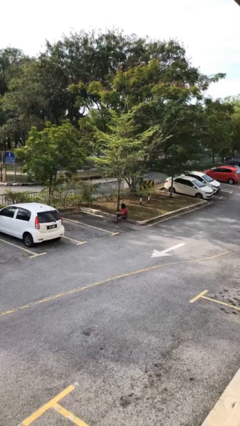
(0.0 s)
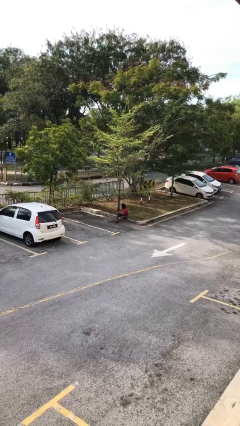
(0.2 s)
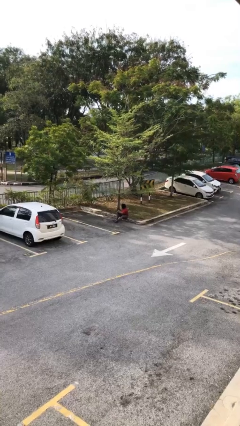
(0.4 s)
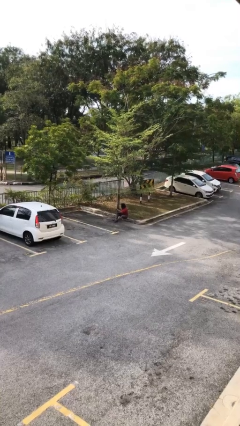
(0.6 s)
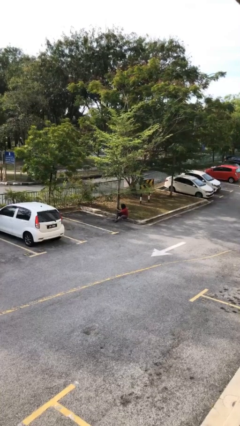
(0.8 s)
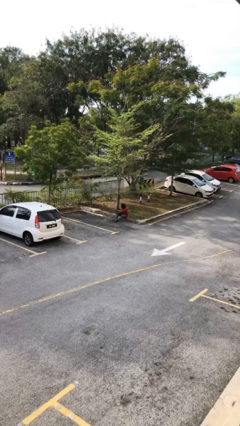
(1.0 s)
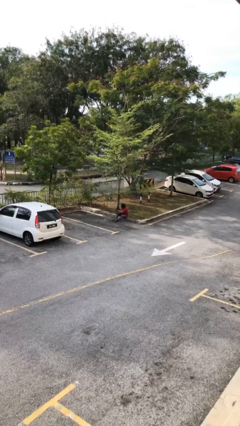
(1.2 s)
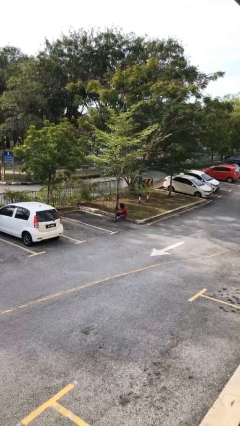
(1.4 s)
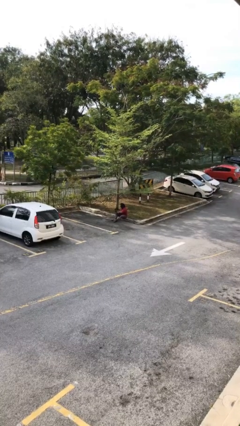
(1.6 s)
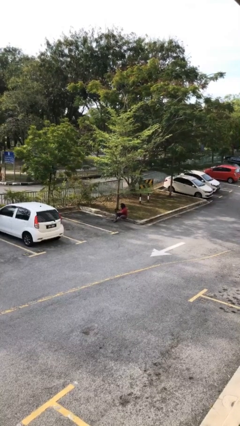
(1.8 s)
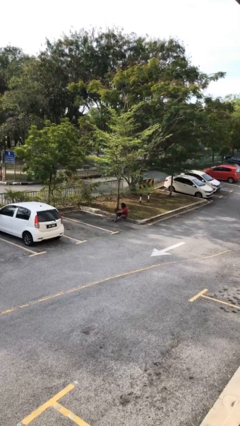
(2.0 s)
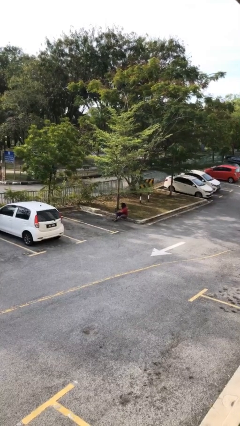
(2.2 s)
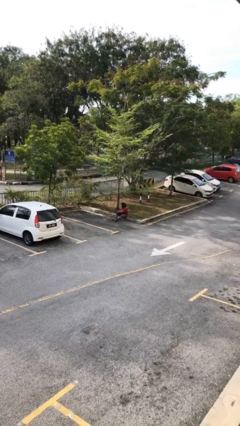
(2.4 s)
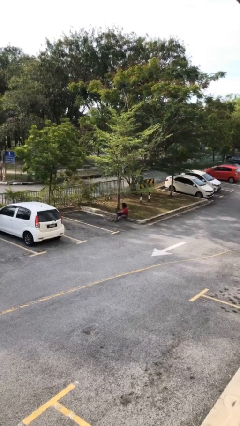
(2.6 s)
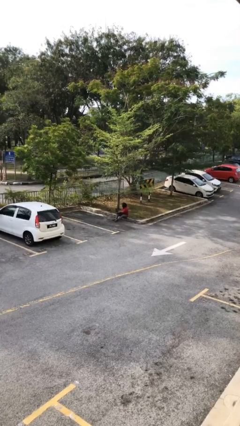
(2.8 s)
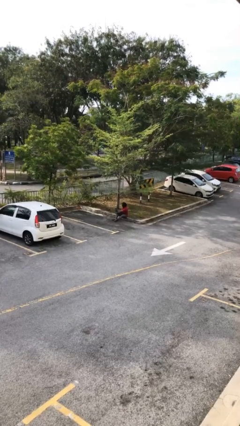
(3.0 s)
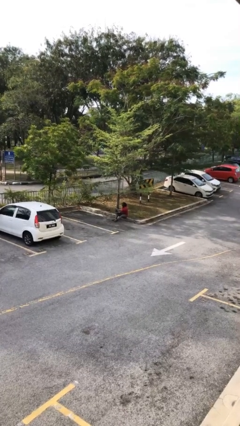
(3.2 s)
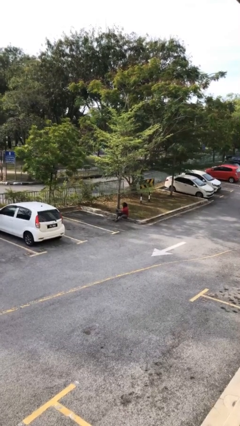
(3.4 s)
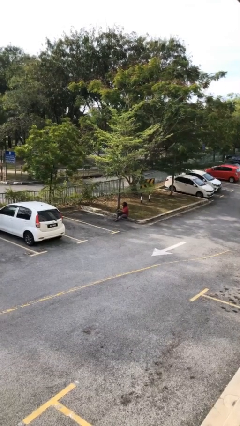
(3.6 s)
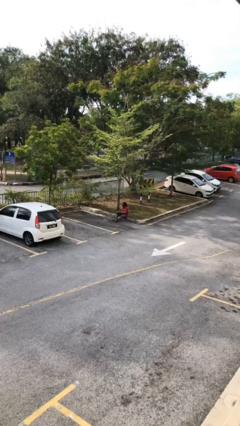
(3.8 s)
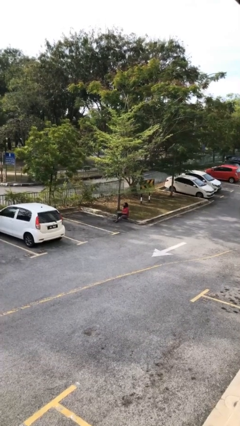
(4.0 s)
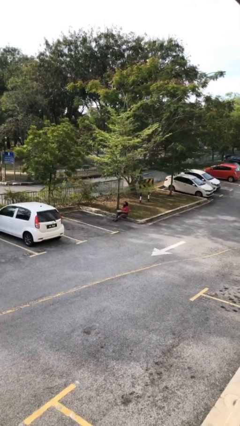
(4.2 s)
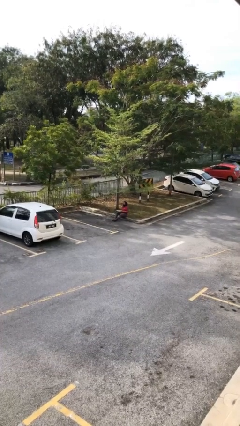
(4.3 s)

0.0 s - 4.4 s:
person interacts with laptop

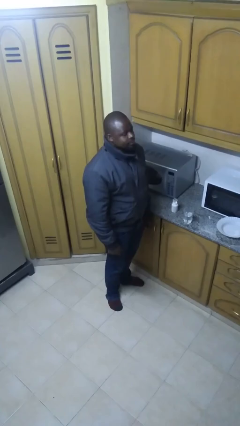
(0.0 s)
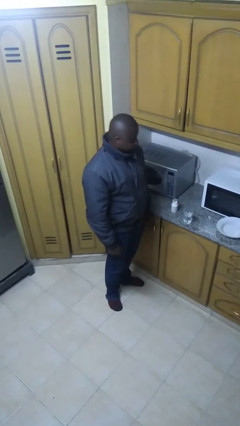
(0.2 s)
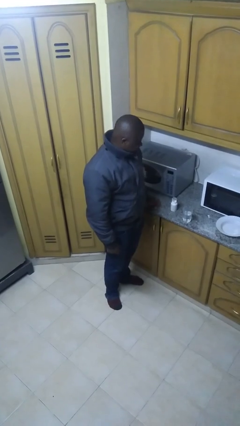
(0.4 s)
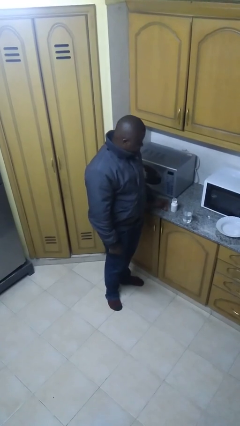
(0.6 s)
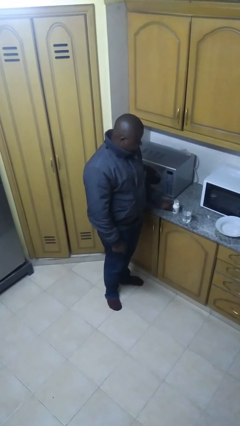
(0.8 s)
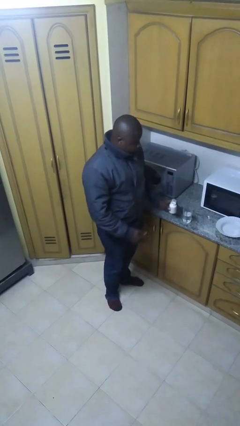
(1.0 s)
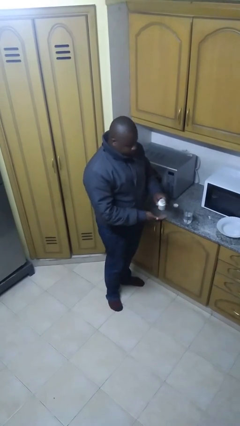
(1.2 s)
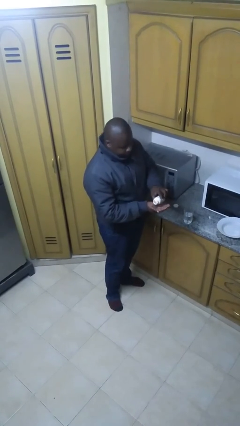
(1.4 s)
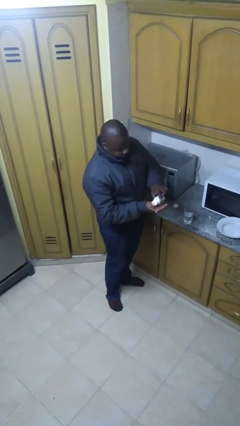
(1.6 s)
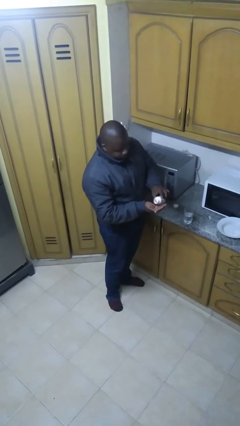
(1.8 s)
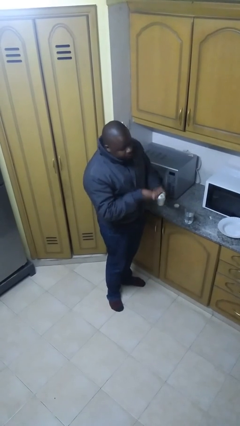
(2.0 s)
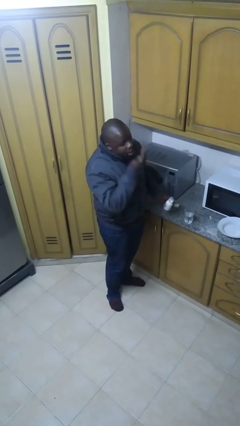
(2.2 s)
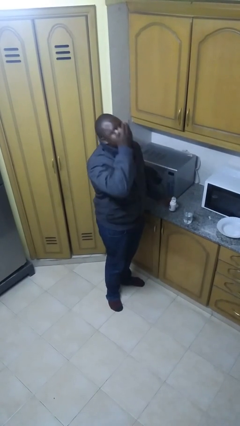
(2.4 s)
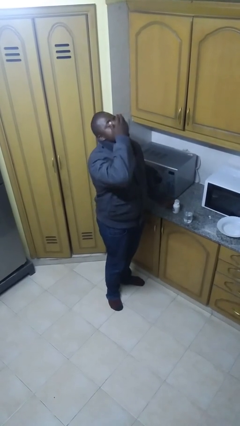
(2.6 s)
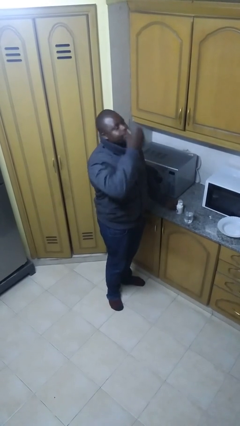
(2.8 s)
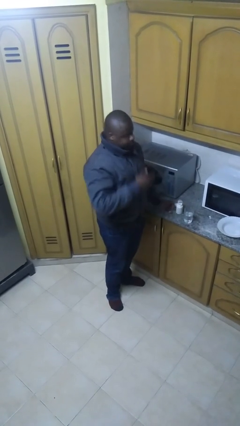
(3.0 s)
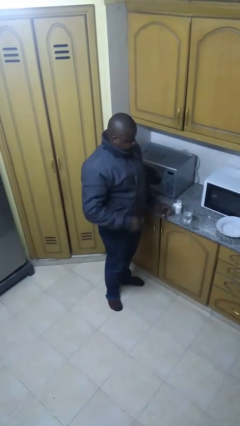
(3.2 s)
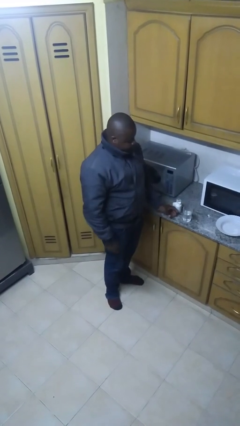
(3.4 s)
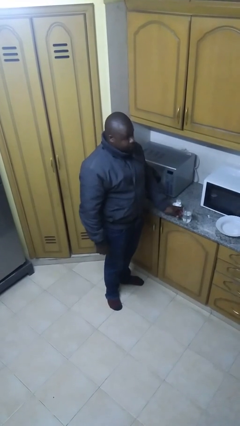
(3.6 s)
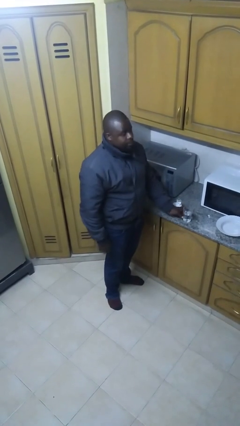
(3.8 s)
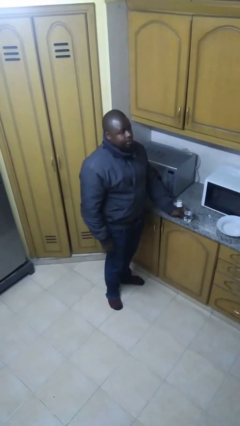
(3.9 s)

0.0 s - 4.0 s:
person takes medicine pills

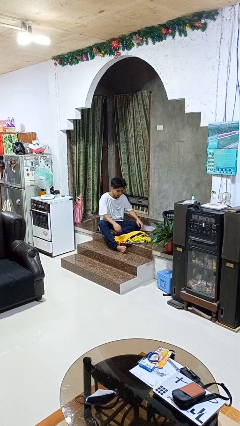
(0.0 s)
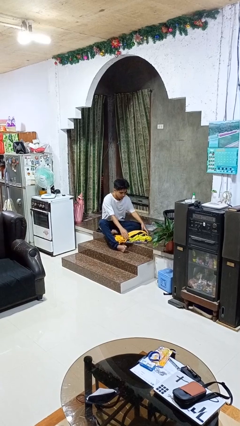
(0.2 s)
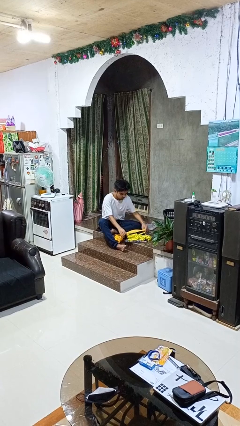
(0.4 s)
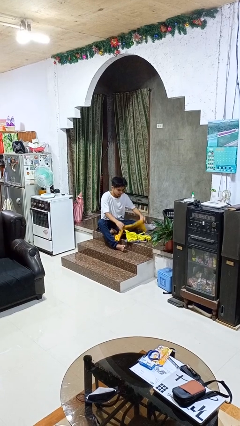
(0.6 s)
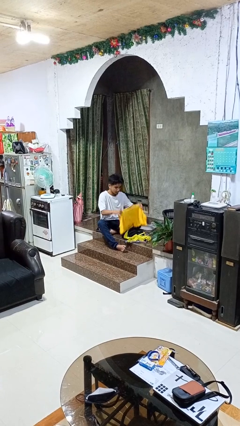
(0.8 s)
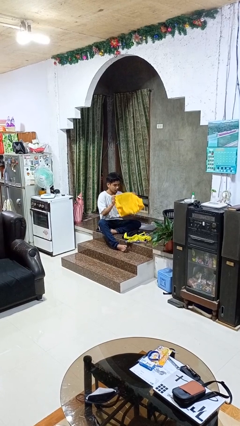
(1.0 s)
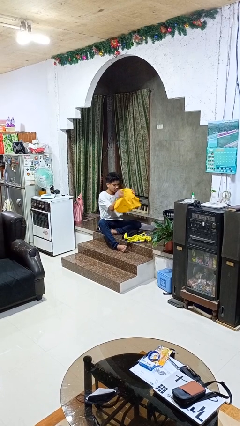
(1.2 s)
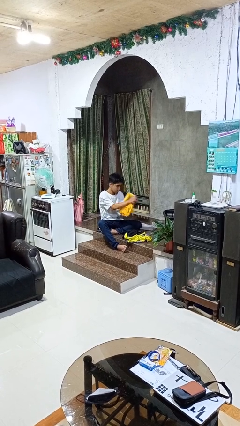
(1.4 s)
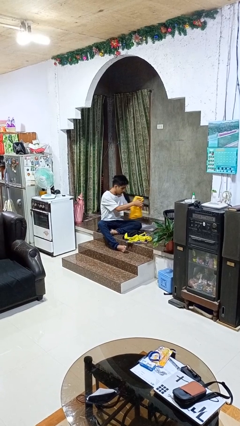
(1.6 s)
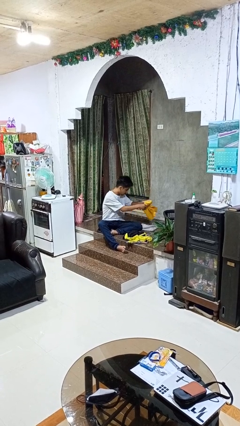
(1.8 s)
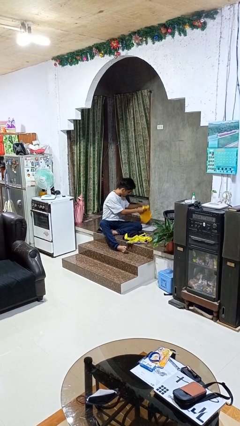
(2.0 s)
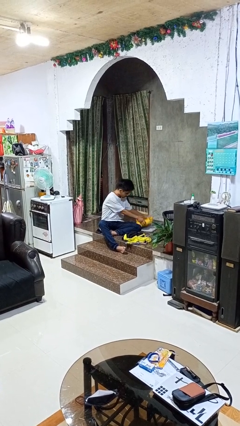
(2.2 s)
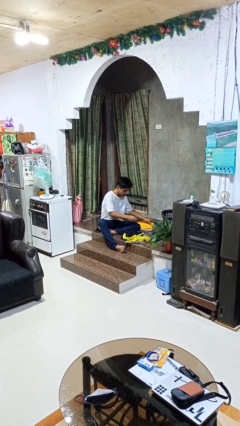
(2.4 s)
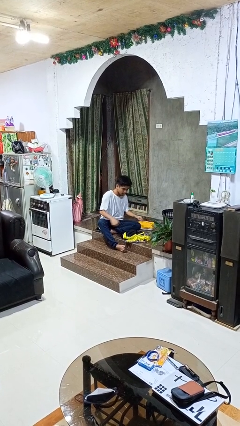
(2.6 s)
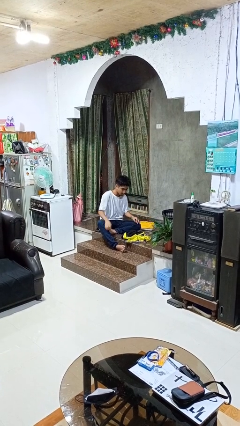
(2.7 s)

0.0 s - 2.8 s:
person folds shirt

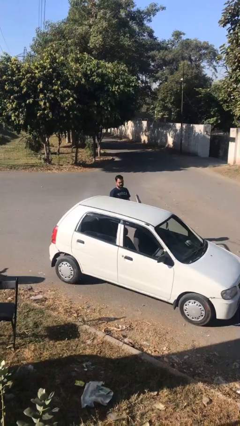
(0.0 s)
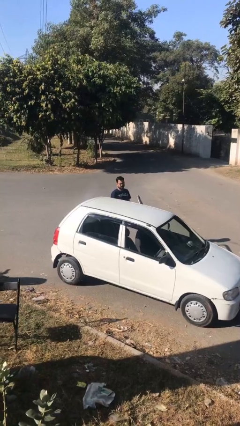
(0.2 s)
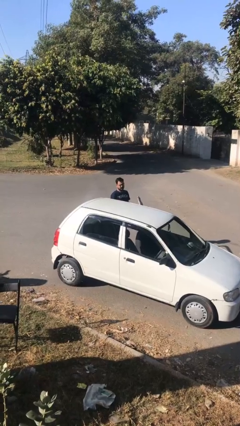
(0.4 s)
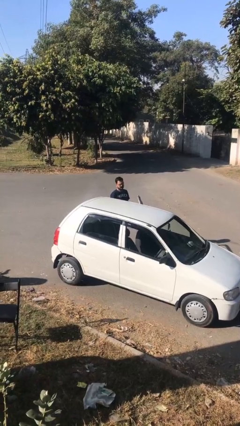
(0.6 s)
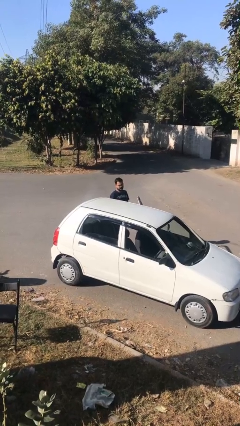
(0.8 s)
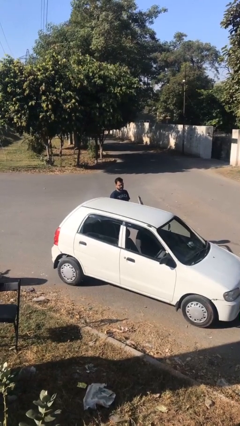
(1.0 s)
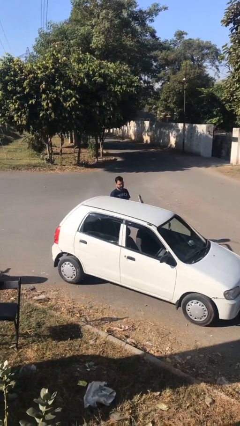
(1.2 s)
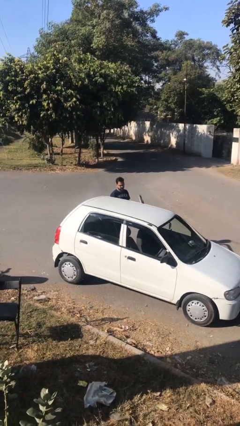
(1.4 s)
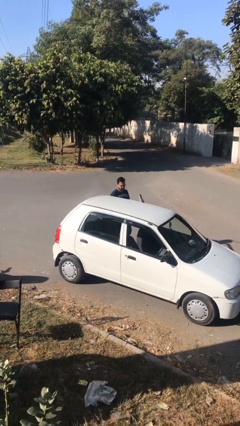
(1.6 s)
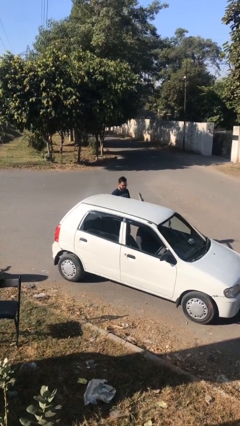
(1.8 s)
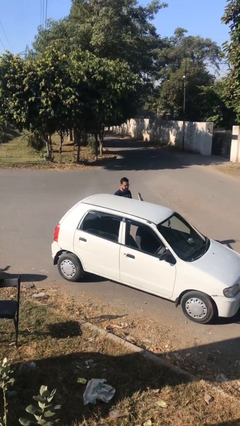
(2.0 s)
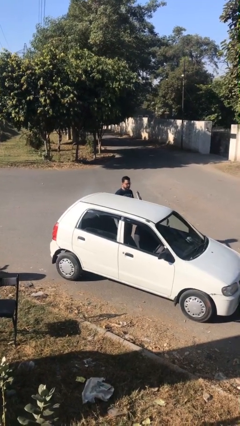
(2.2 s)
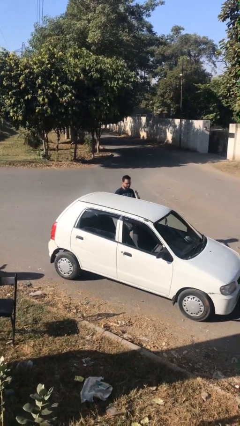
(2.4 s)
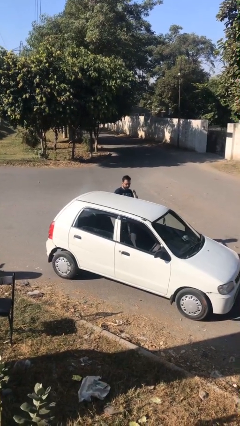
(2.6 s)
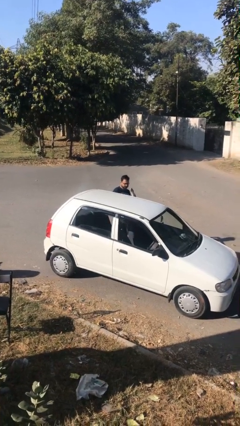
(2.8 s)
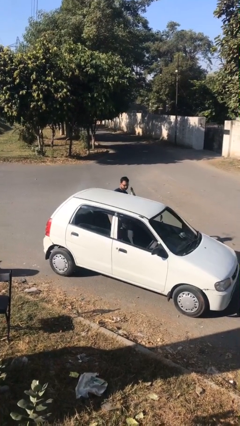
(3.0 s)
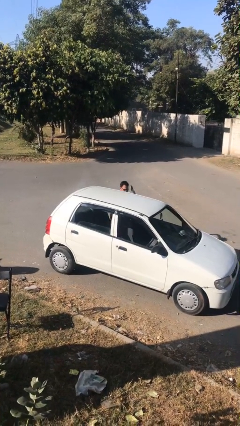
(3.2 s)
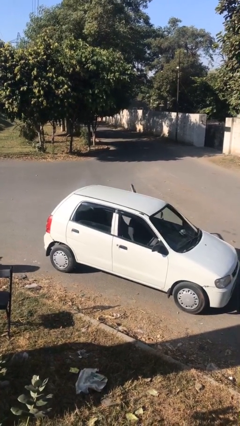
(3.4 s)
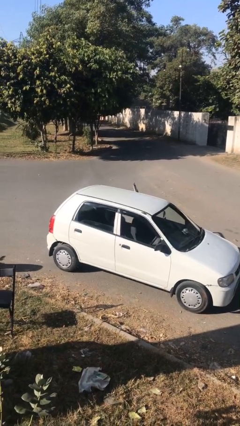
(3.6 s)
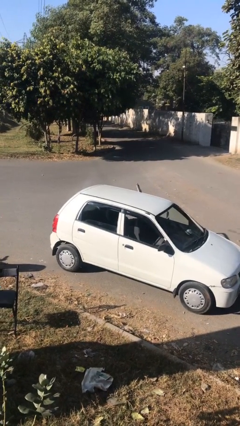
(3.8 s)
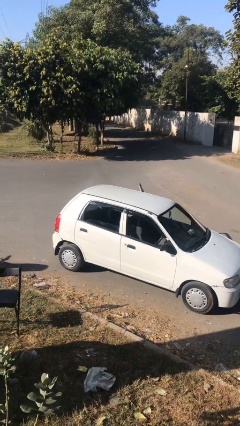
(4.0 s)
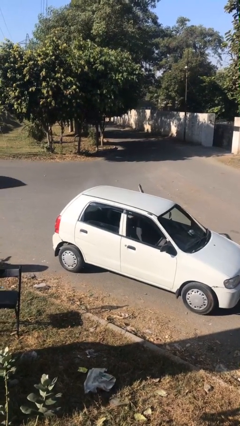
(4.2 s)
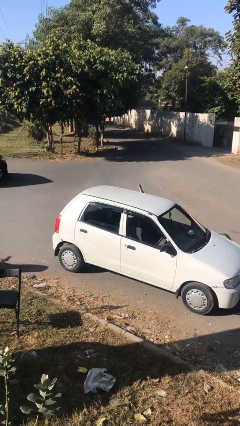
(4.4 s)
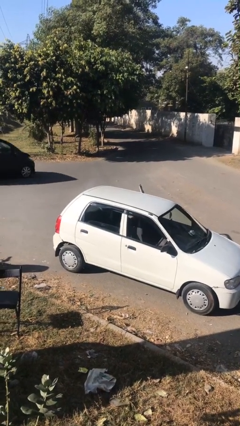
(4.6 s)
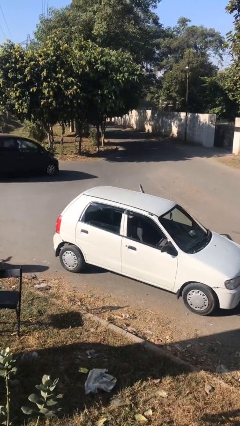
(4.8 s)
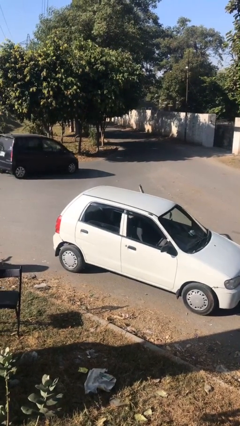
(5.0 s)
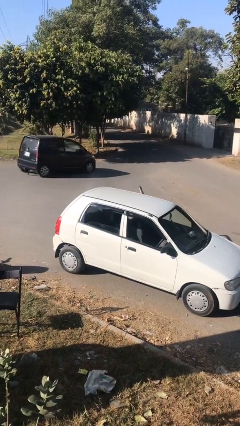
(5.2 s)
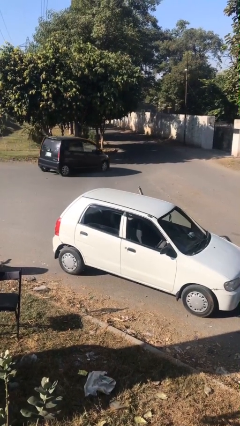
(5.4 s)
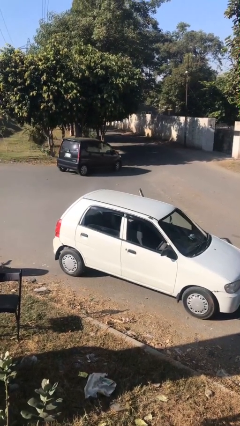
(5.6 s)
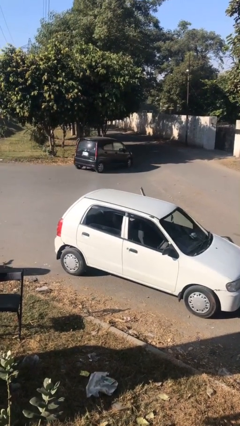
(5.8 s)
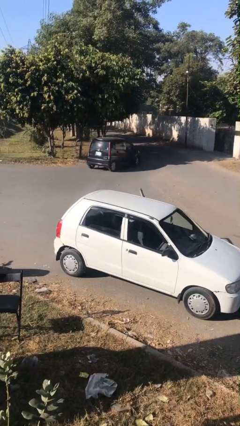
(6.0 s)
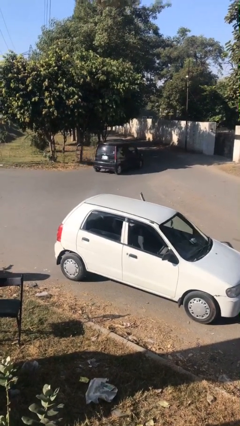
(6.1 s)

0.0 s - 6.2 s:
person enters car

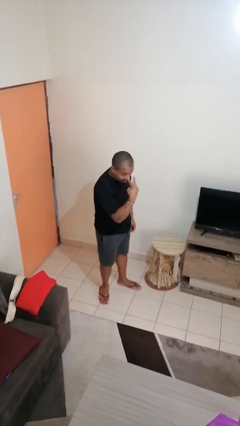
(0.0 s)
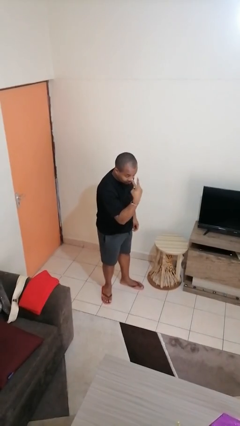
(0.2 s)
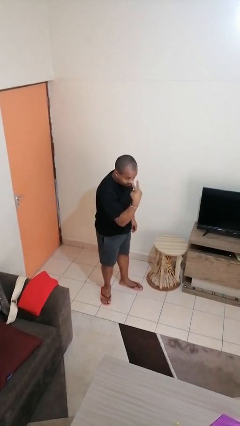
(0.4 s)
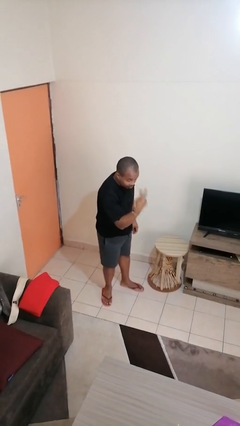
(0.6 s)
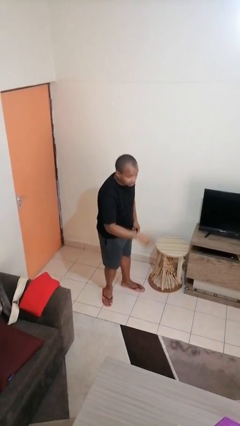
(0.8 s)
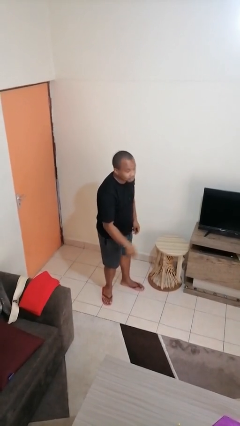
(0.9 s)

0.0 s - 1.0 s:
person gestures watch closely
